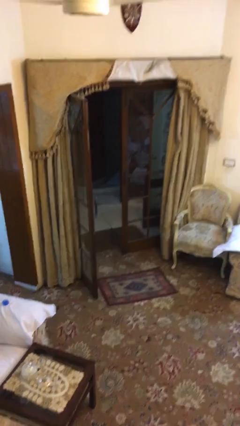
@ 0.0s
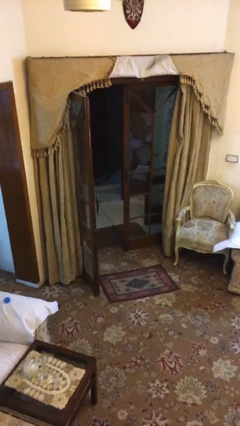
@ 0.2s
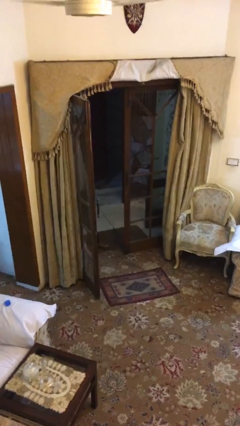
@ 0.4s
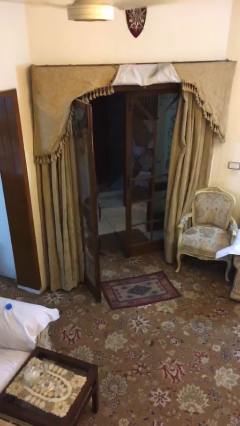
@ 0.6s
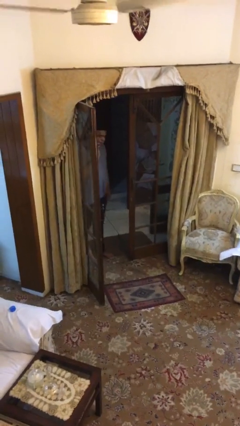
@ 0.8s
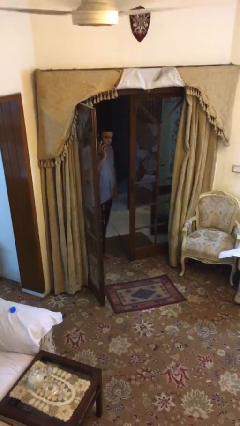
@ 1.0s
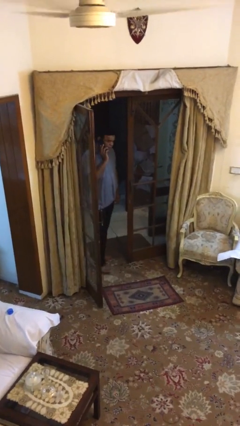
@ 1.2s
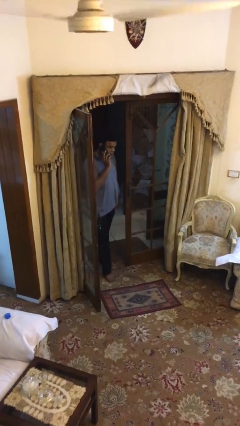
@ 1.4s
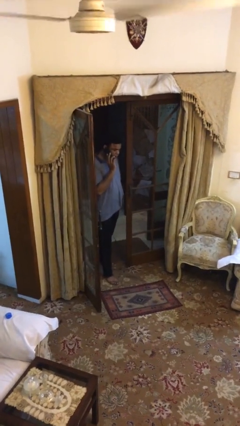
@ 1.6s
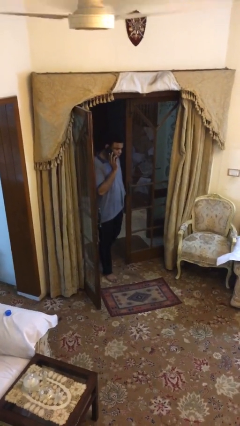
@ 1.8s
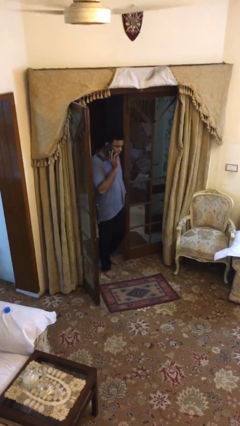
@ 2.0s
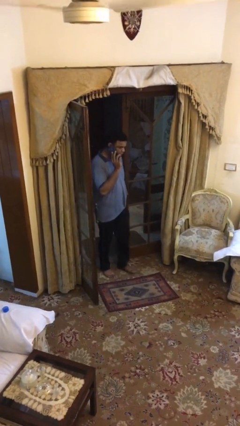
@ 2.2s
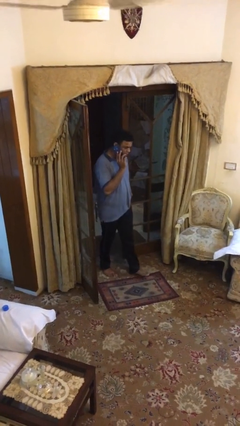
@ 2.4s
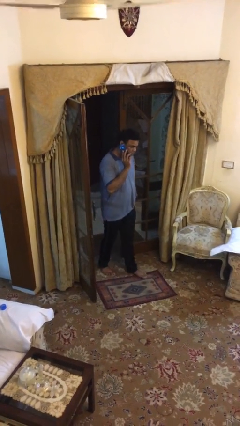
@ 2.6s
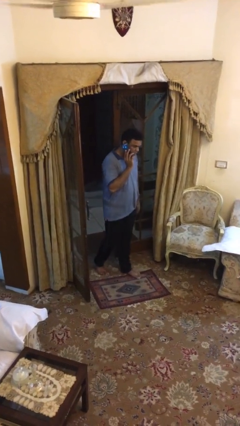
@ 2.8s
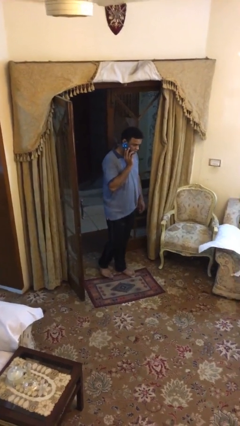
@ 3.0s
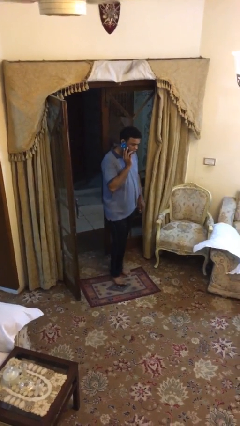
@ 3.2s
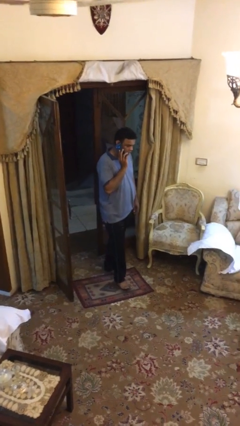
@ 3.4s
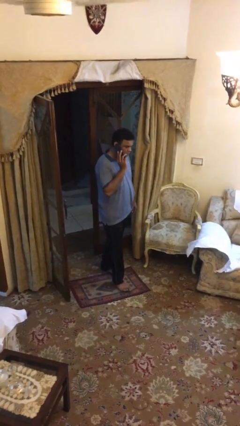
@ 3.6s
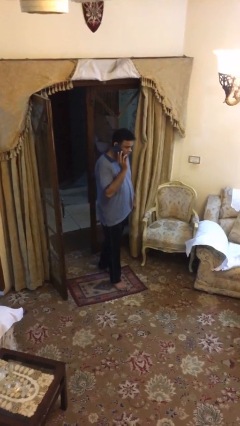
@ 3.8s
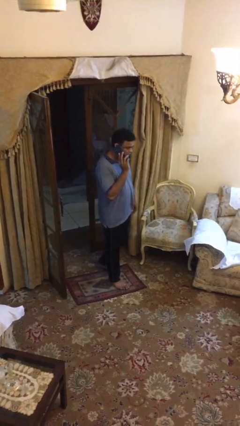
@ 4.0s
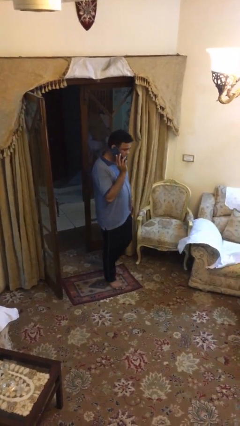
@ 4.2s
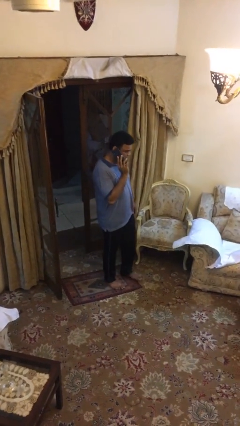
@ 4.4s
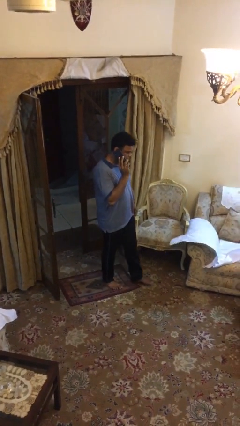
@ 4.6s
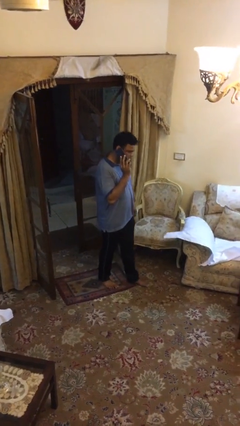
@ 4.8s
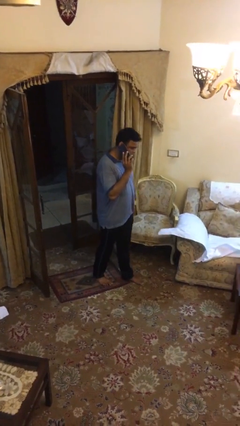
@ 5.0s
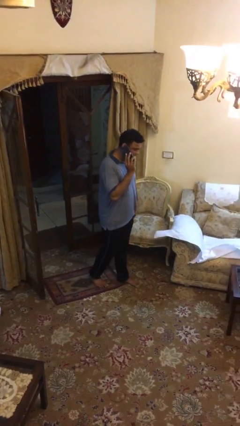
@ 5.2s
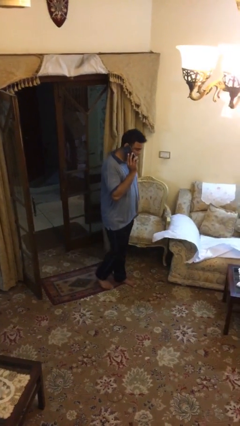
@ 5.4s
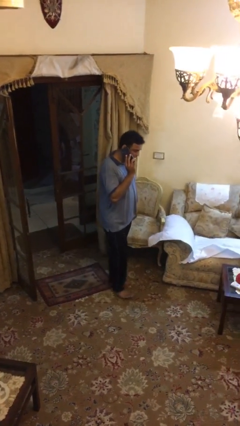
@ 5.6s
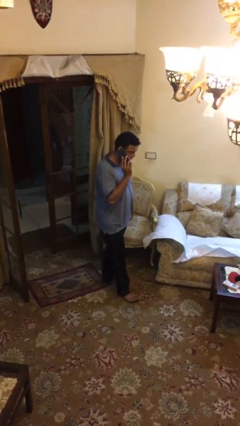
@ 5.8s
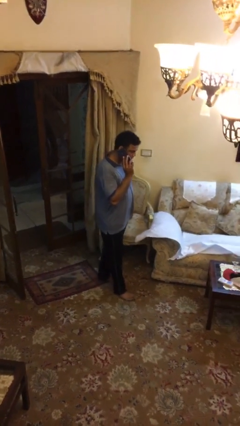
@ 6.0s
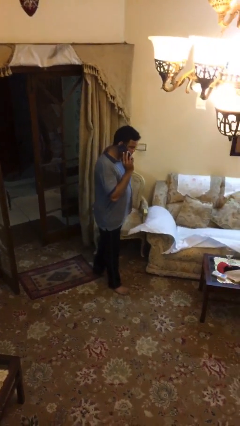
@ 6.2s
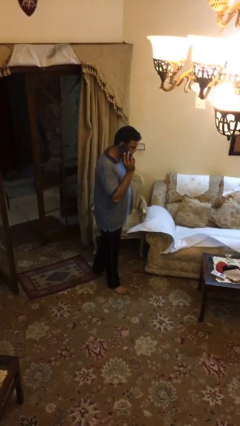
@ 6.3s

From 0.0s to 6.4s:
person enters scene through structure

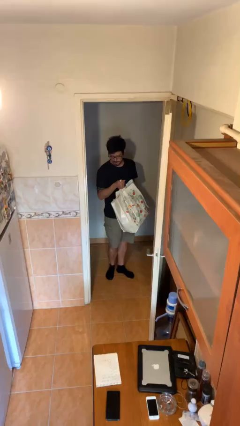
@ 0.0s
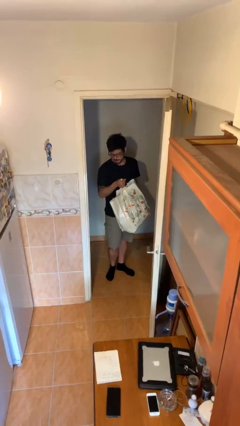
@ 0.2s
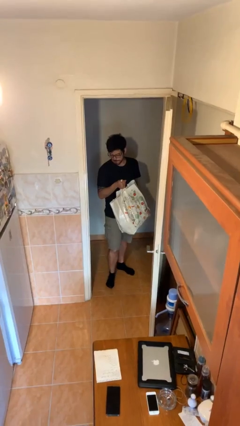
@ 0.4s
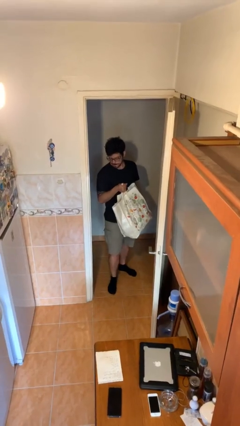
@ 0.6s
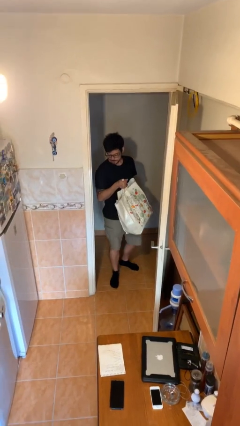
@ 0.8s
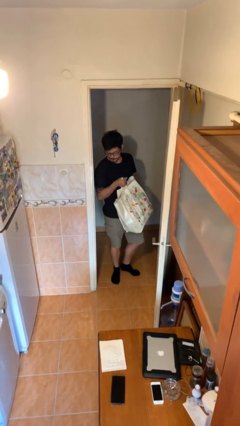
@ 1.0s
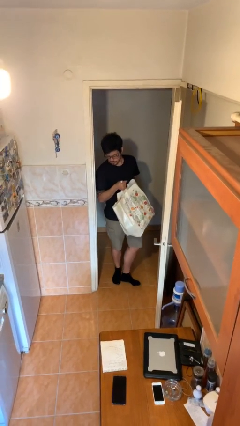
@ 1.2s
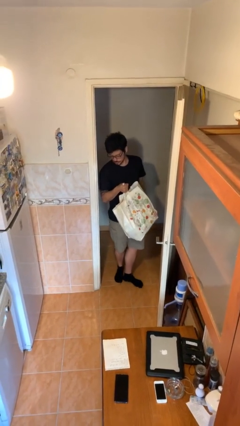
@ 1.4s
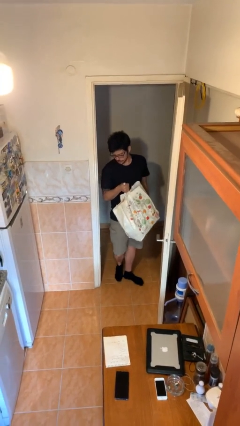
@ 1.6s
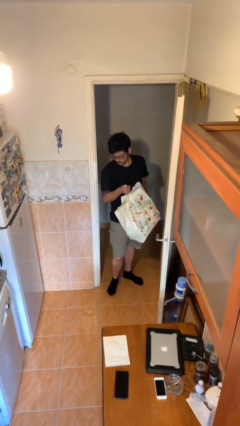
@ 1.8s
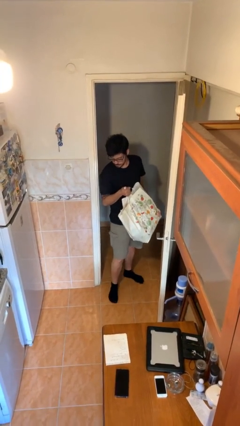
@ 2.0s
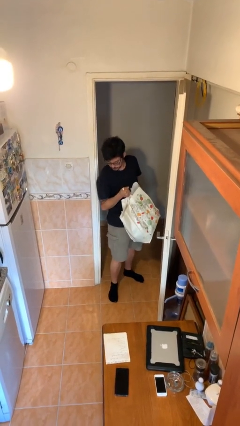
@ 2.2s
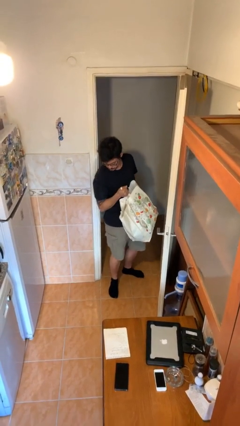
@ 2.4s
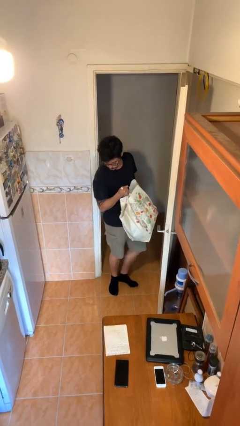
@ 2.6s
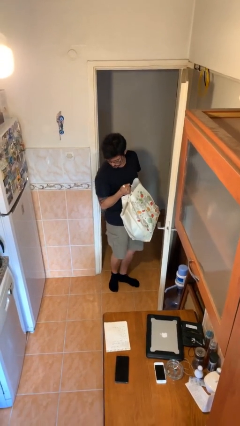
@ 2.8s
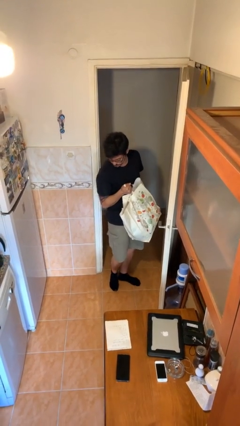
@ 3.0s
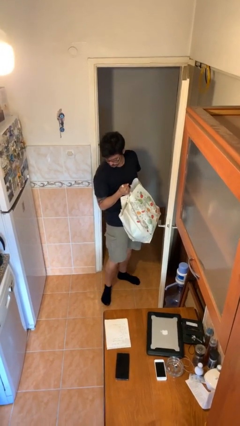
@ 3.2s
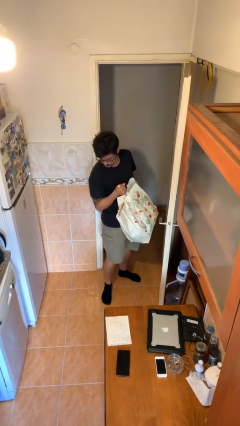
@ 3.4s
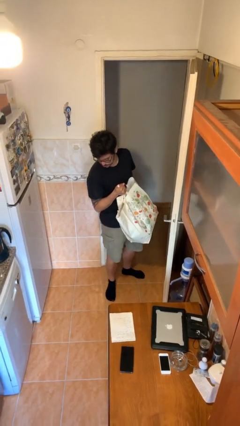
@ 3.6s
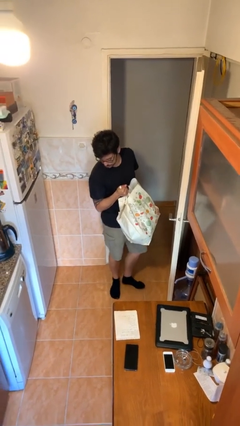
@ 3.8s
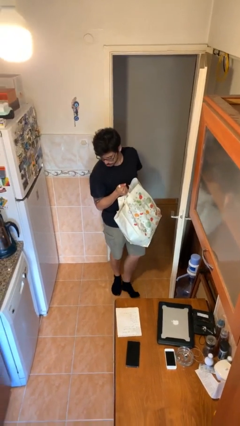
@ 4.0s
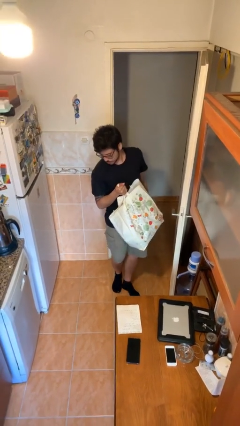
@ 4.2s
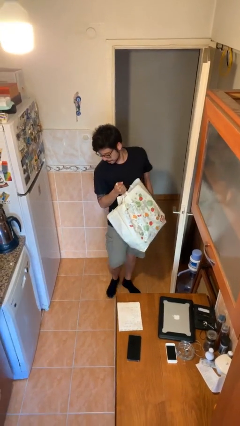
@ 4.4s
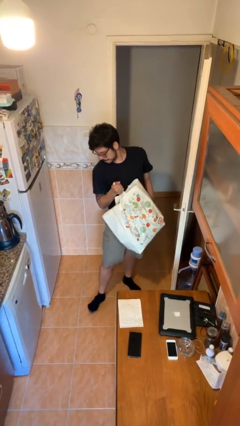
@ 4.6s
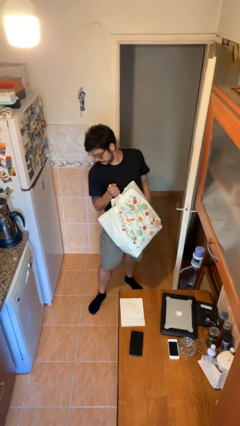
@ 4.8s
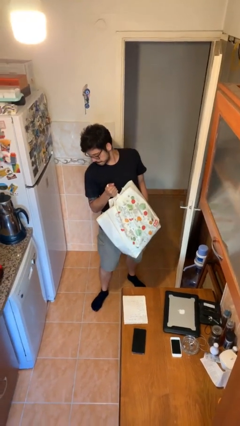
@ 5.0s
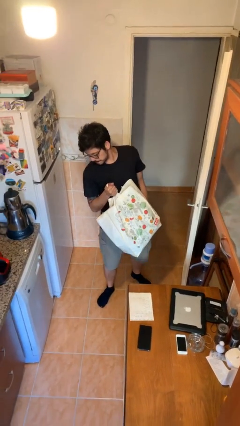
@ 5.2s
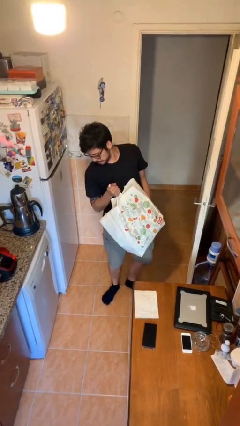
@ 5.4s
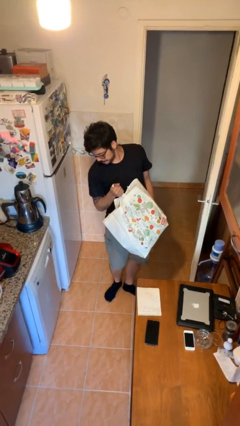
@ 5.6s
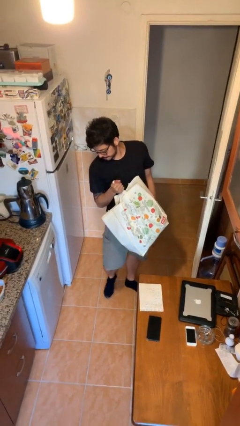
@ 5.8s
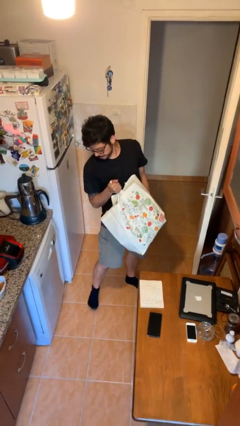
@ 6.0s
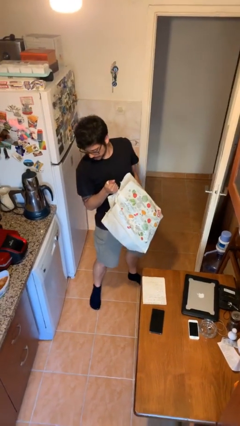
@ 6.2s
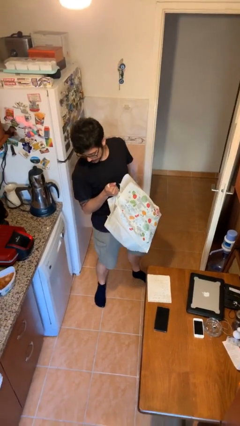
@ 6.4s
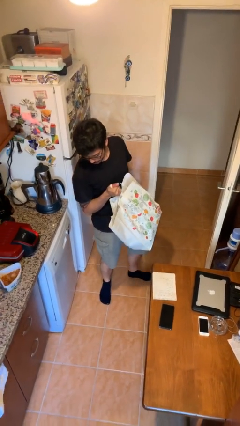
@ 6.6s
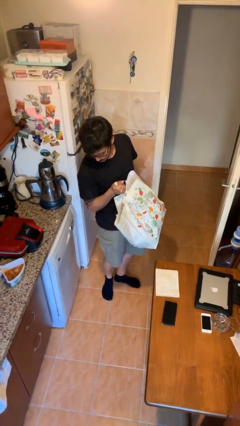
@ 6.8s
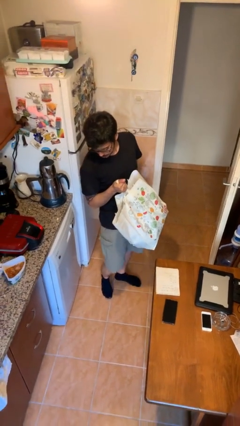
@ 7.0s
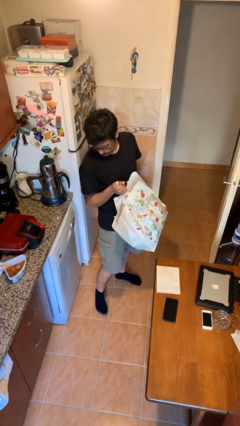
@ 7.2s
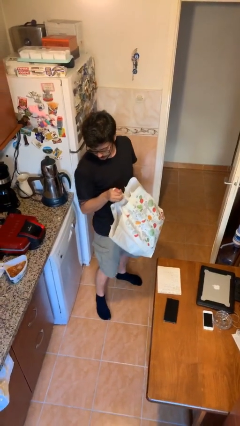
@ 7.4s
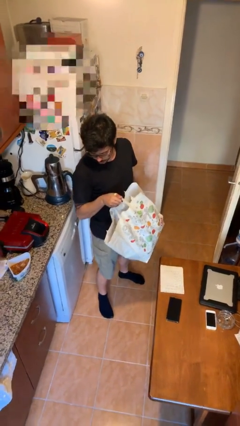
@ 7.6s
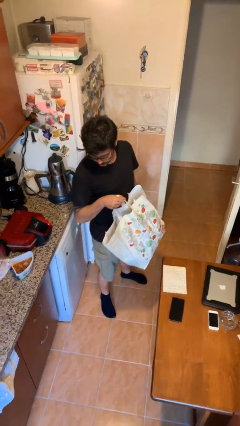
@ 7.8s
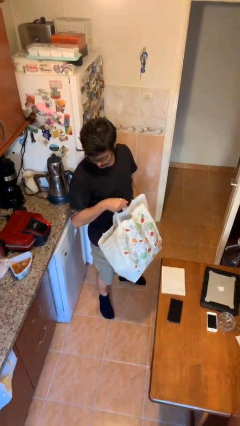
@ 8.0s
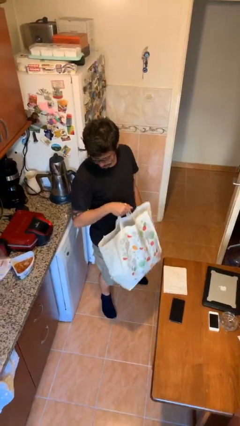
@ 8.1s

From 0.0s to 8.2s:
person carries heavy object

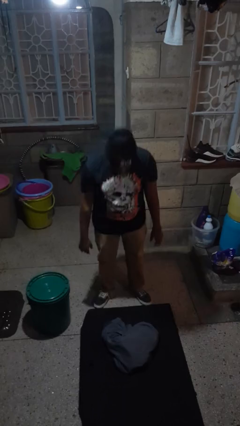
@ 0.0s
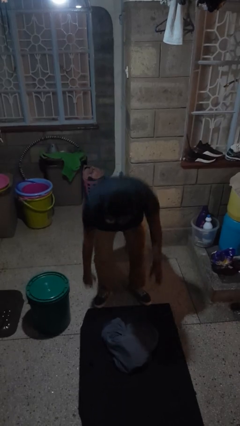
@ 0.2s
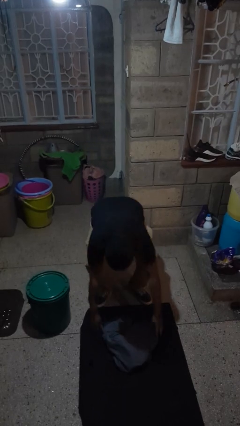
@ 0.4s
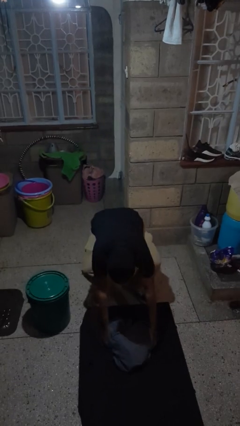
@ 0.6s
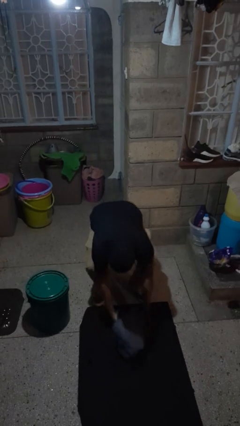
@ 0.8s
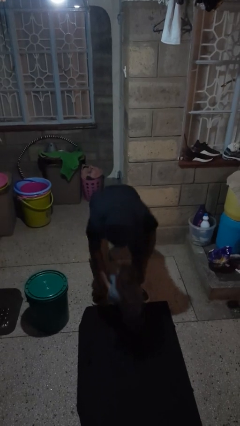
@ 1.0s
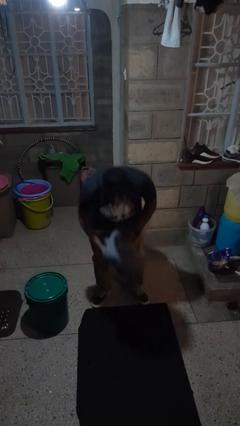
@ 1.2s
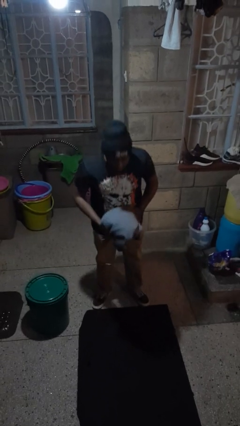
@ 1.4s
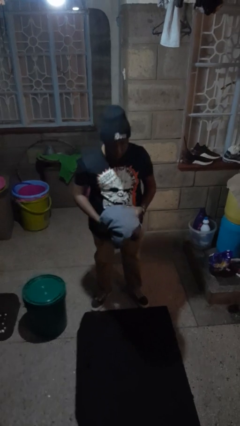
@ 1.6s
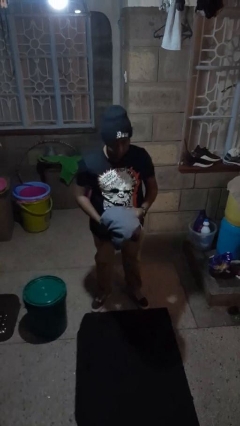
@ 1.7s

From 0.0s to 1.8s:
person picks up object from floor

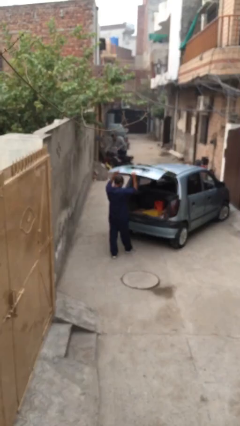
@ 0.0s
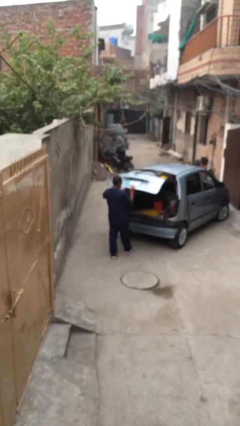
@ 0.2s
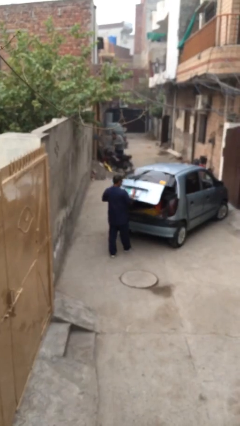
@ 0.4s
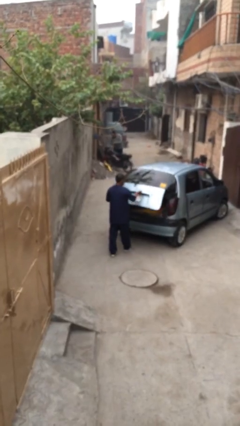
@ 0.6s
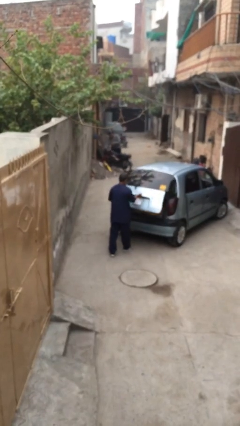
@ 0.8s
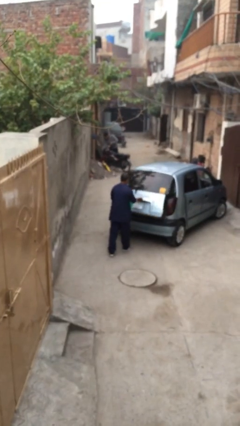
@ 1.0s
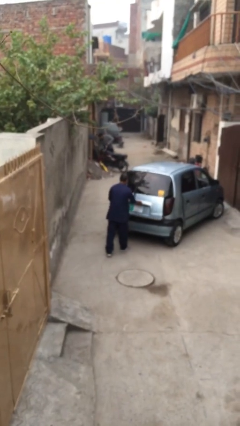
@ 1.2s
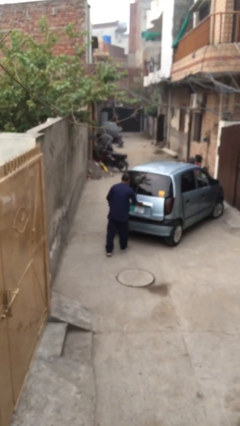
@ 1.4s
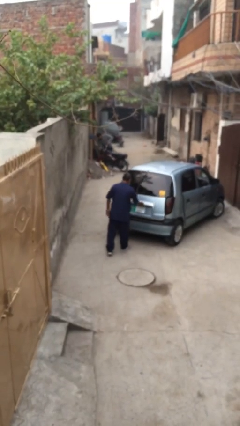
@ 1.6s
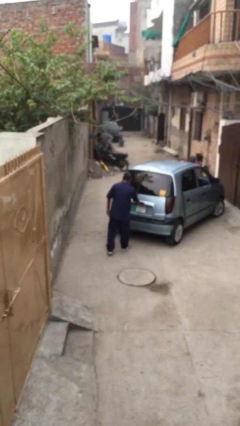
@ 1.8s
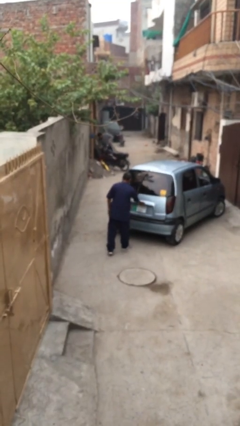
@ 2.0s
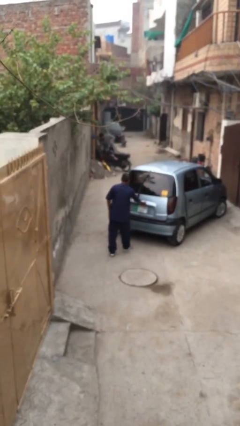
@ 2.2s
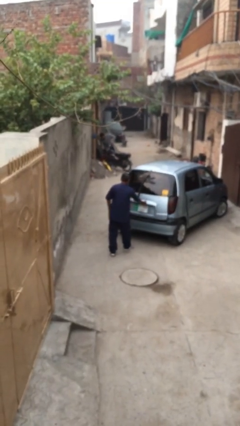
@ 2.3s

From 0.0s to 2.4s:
person closes car trunk
